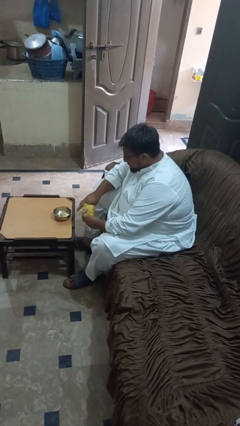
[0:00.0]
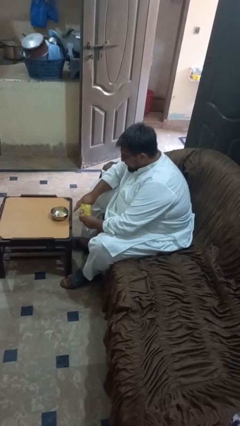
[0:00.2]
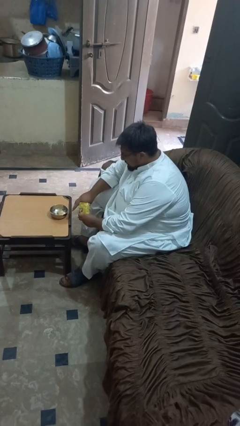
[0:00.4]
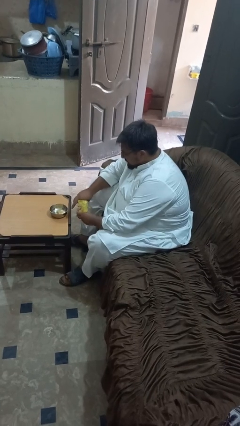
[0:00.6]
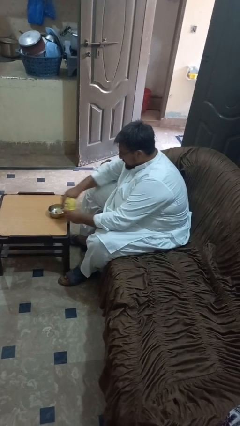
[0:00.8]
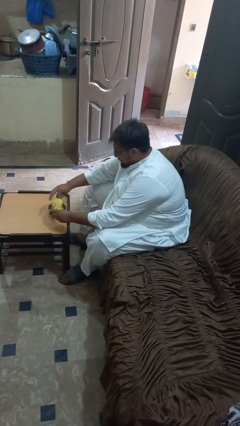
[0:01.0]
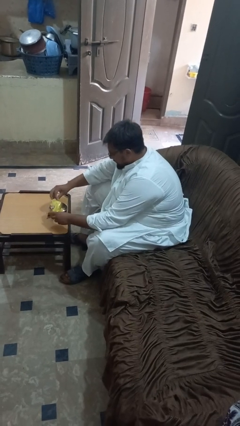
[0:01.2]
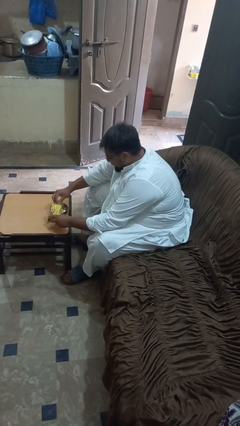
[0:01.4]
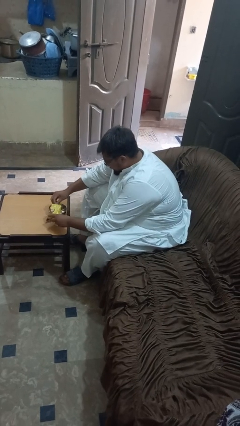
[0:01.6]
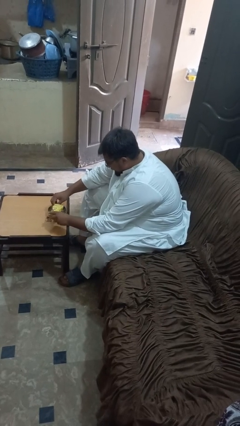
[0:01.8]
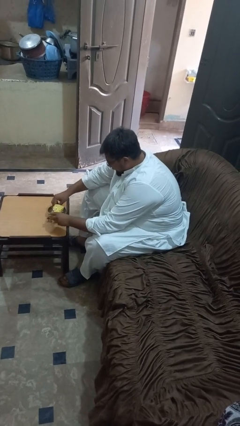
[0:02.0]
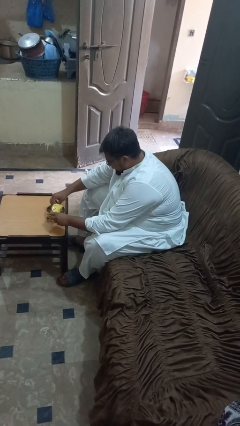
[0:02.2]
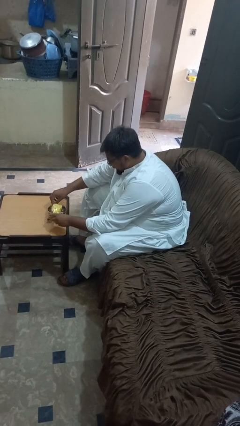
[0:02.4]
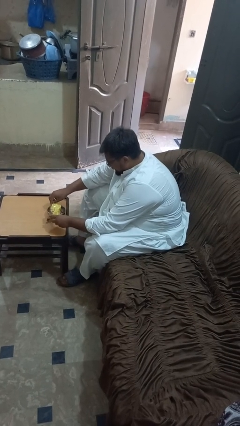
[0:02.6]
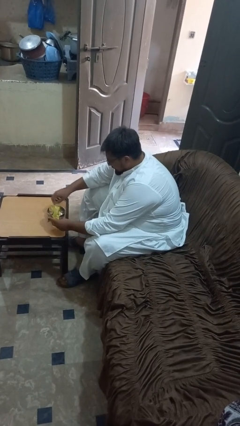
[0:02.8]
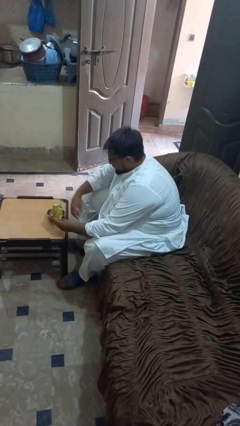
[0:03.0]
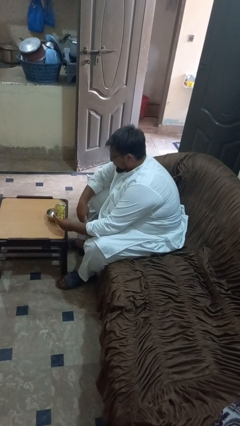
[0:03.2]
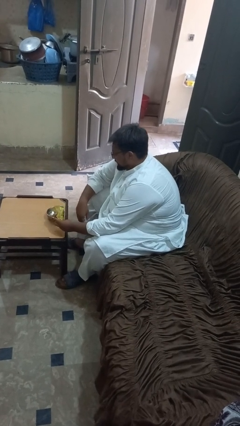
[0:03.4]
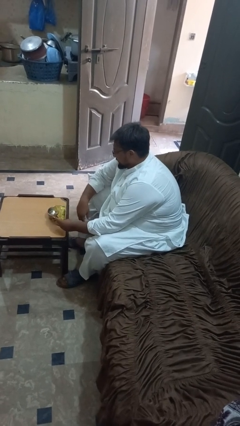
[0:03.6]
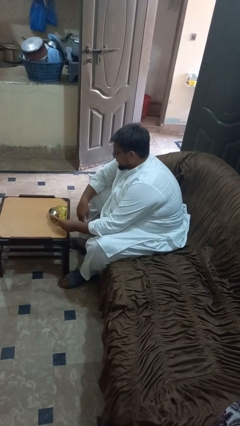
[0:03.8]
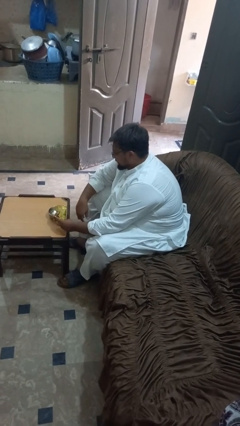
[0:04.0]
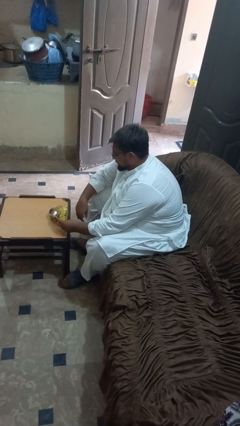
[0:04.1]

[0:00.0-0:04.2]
person pours into bowl

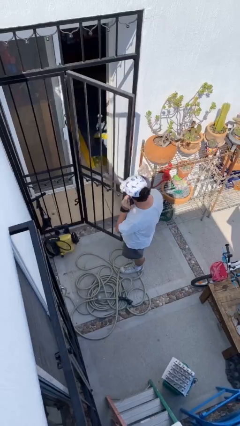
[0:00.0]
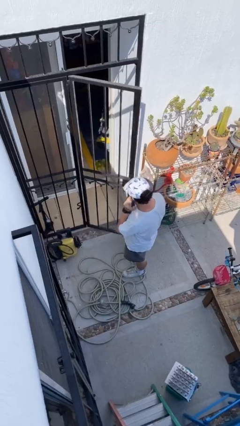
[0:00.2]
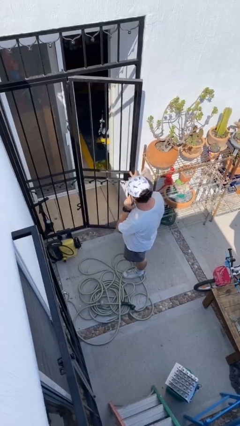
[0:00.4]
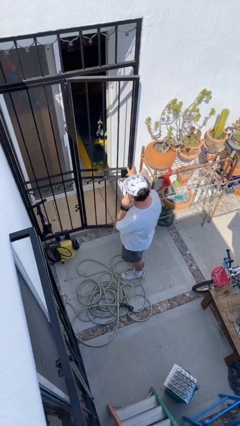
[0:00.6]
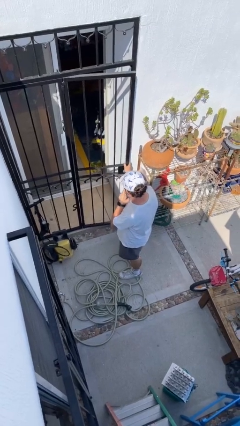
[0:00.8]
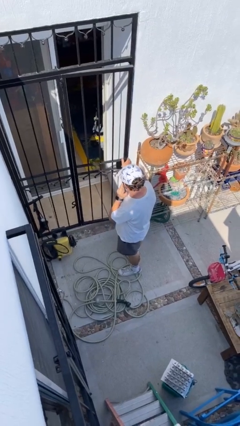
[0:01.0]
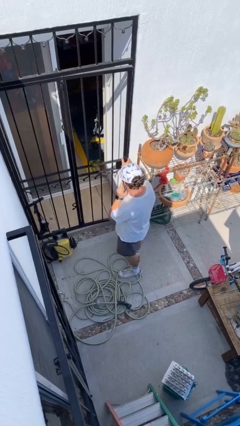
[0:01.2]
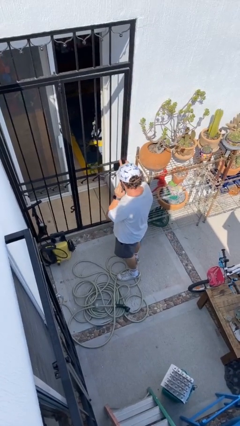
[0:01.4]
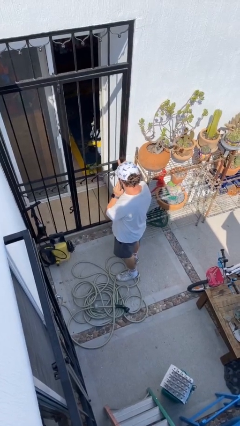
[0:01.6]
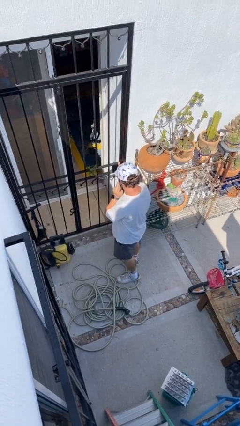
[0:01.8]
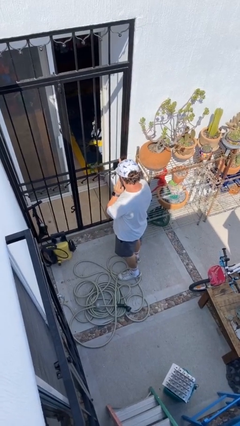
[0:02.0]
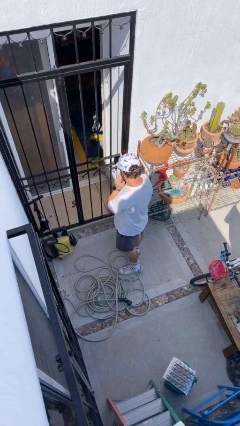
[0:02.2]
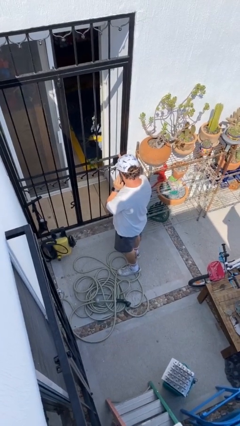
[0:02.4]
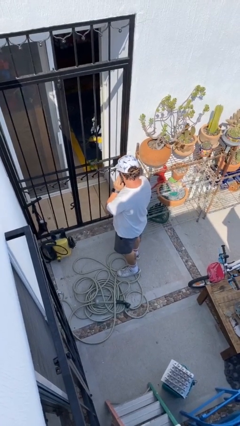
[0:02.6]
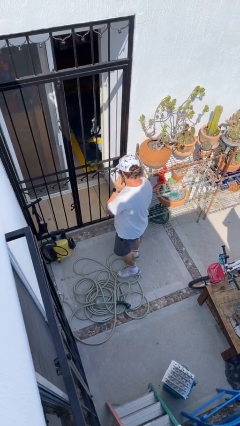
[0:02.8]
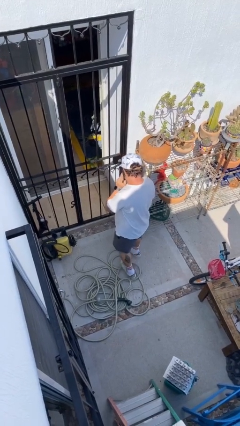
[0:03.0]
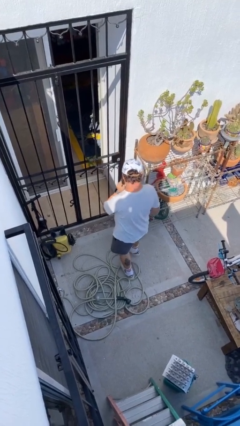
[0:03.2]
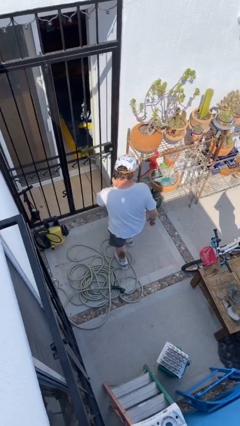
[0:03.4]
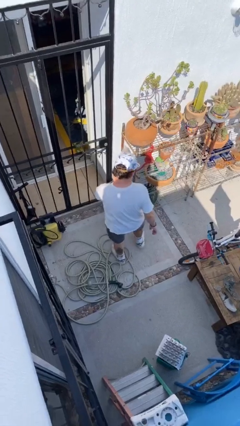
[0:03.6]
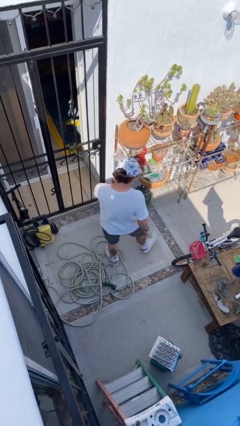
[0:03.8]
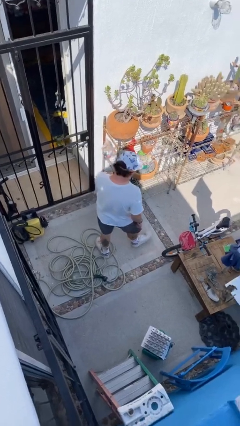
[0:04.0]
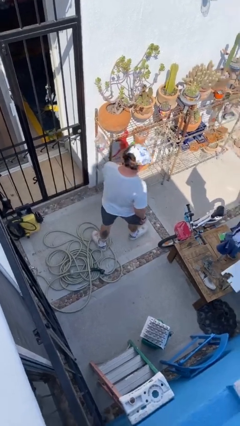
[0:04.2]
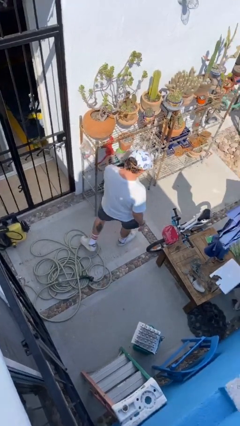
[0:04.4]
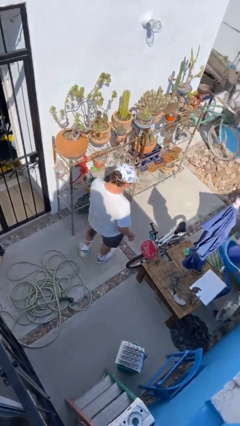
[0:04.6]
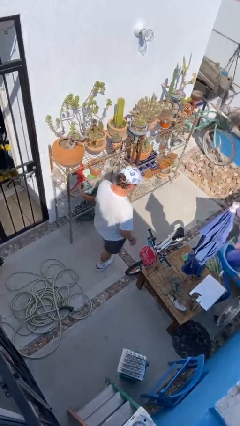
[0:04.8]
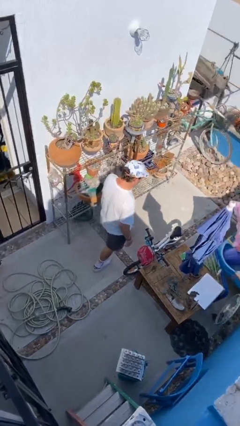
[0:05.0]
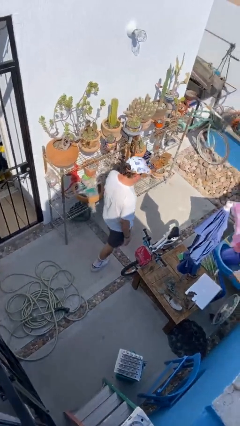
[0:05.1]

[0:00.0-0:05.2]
person closes facility door

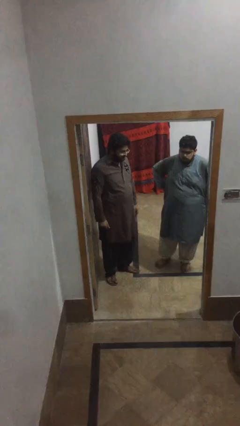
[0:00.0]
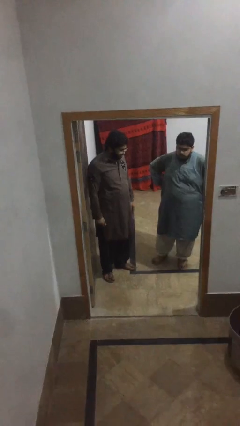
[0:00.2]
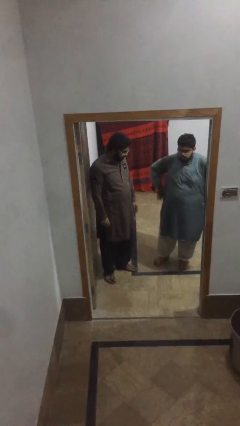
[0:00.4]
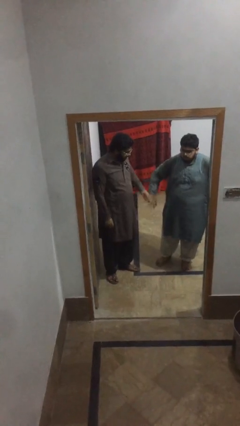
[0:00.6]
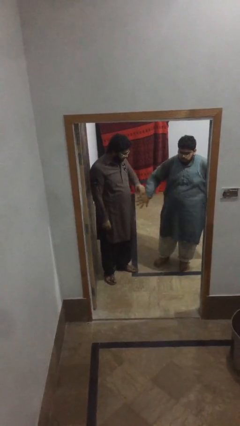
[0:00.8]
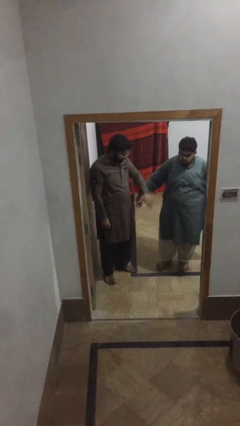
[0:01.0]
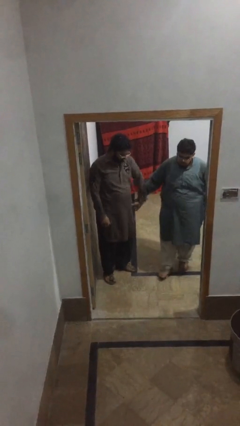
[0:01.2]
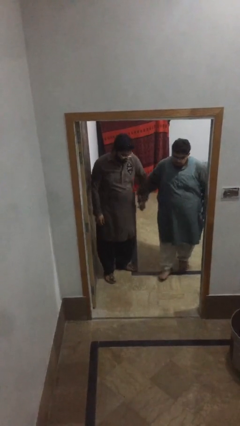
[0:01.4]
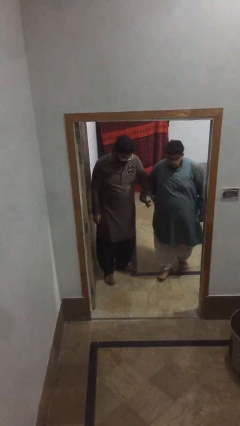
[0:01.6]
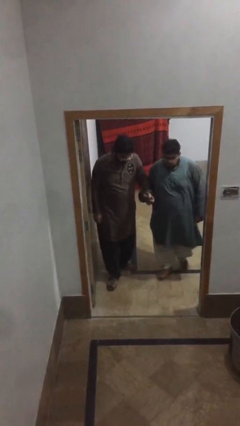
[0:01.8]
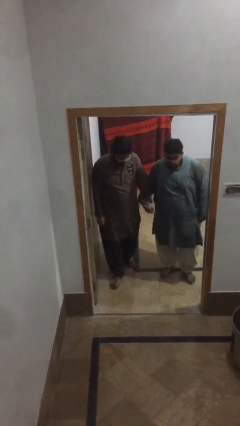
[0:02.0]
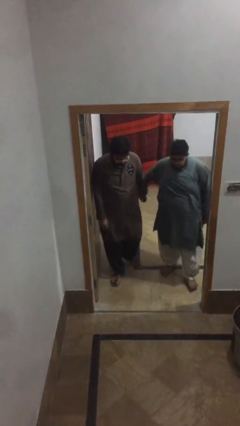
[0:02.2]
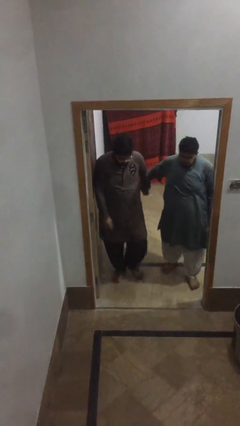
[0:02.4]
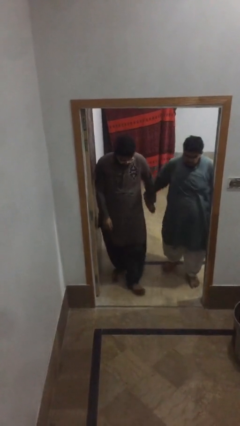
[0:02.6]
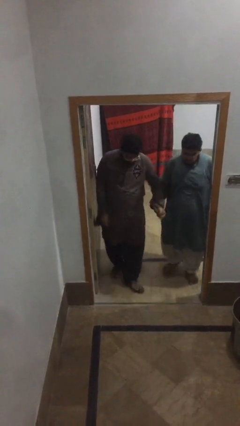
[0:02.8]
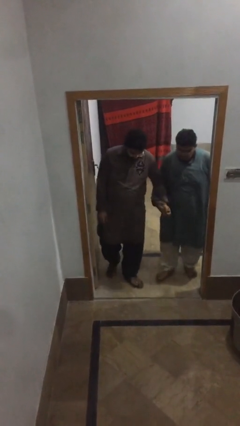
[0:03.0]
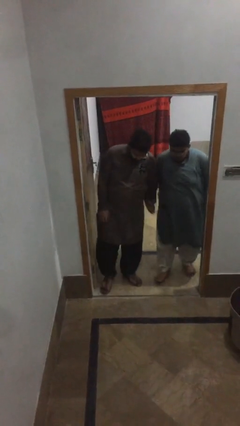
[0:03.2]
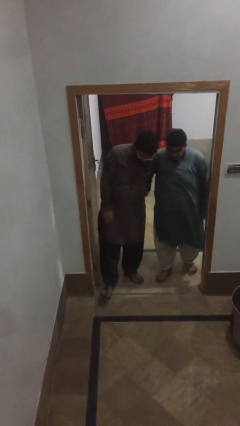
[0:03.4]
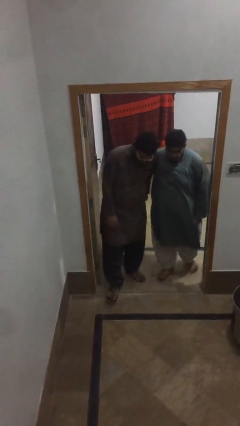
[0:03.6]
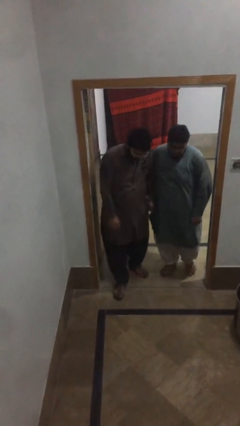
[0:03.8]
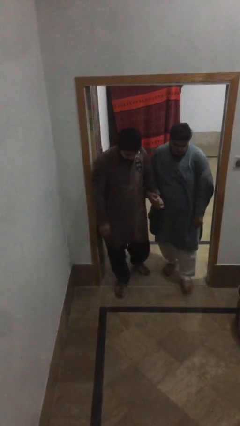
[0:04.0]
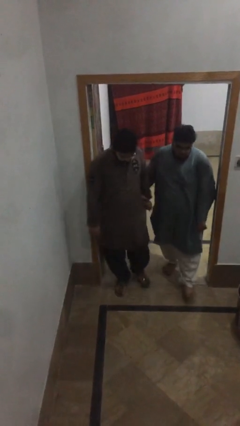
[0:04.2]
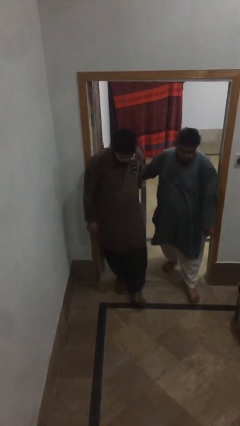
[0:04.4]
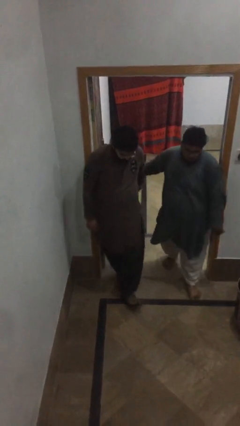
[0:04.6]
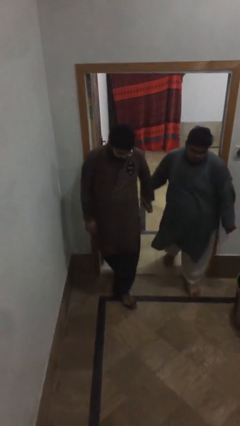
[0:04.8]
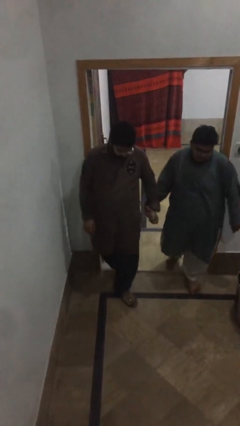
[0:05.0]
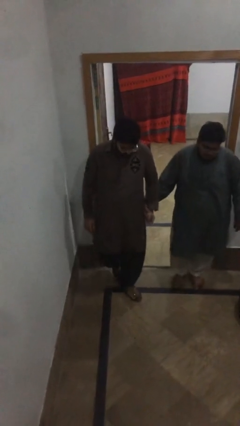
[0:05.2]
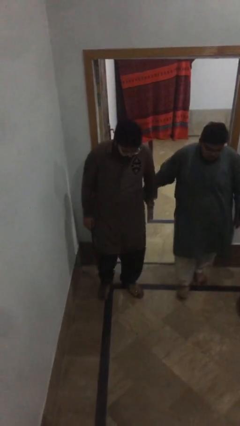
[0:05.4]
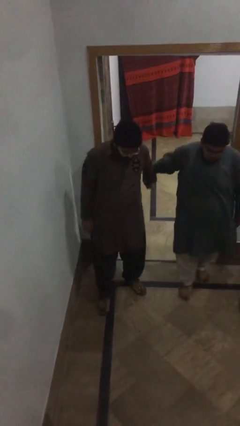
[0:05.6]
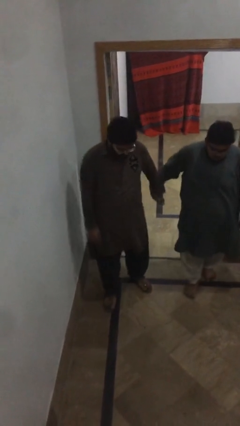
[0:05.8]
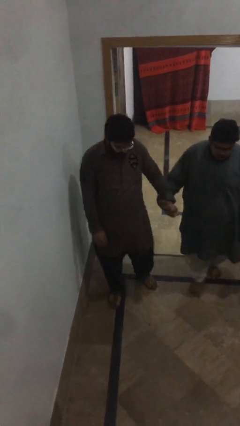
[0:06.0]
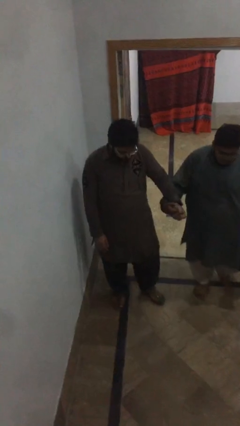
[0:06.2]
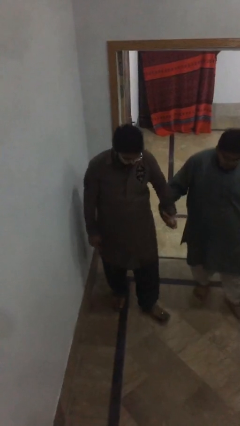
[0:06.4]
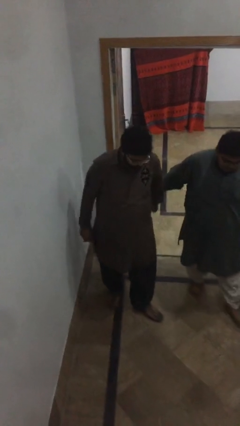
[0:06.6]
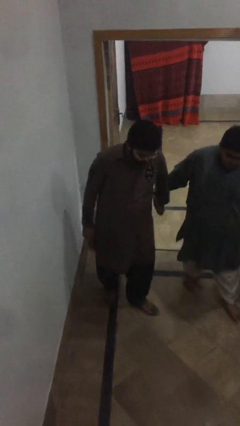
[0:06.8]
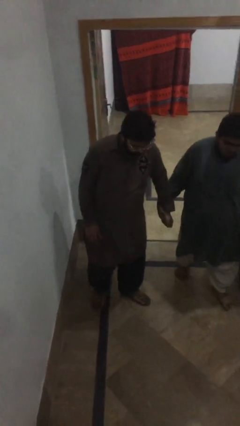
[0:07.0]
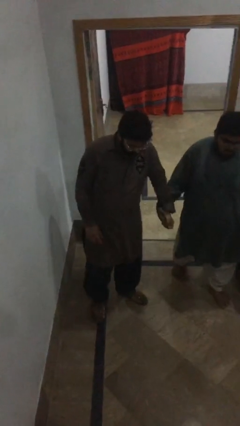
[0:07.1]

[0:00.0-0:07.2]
person holds hand

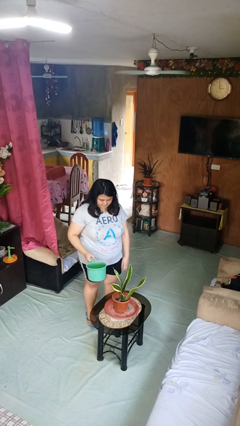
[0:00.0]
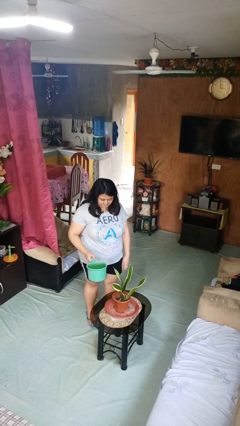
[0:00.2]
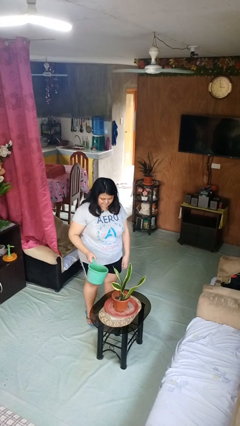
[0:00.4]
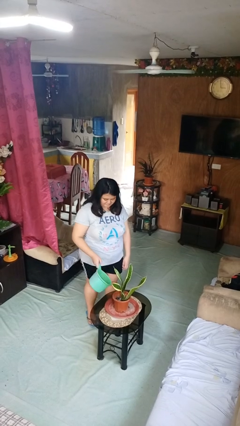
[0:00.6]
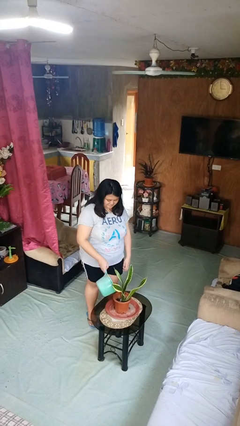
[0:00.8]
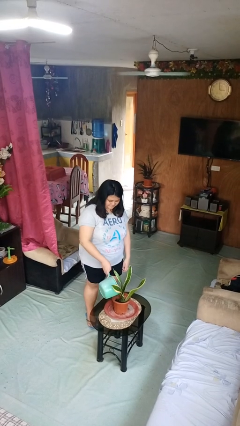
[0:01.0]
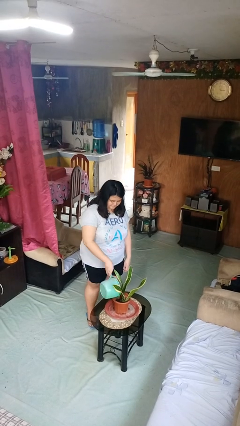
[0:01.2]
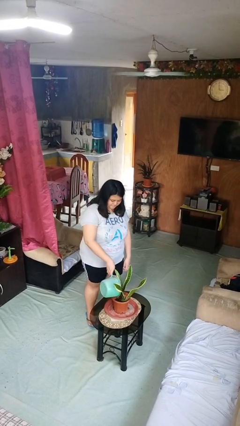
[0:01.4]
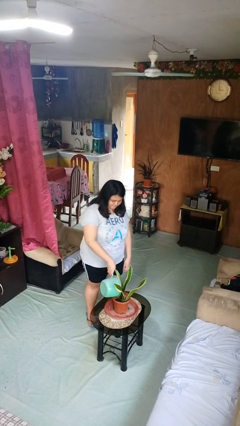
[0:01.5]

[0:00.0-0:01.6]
person waters houseplant
